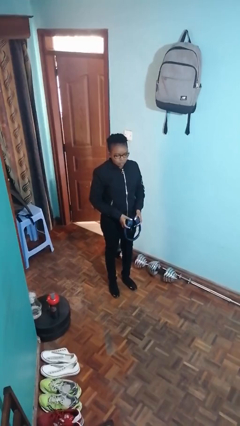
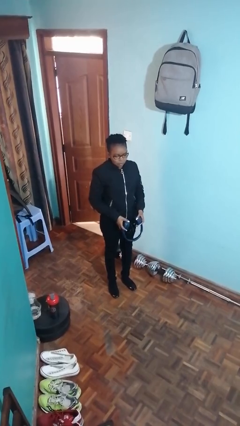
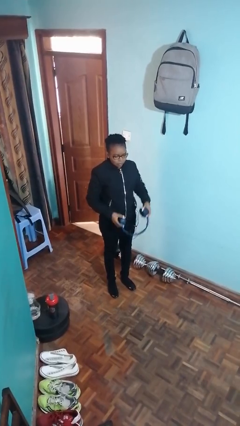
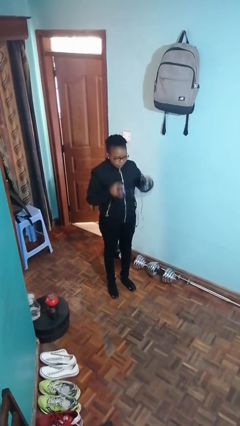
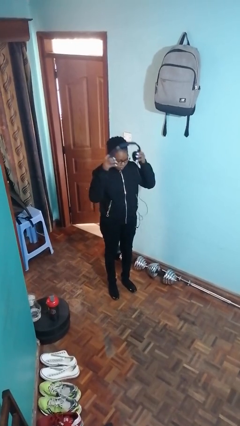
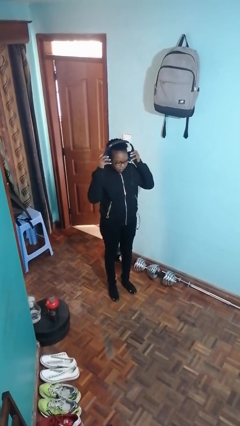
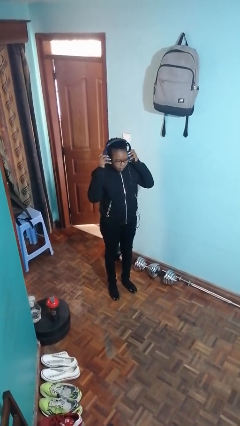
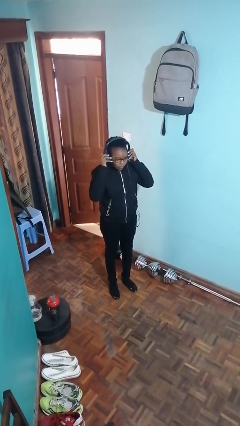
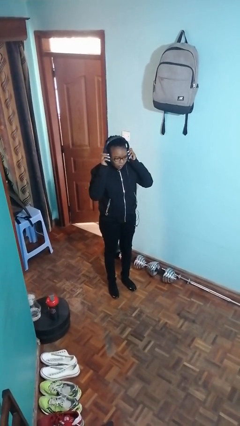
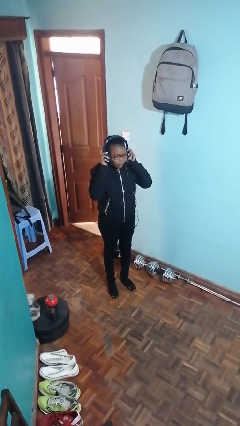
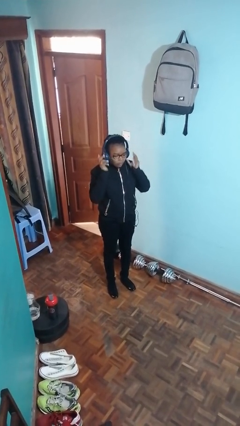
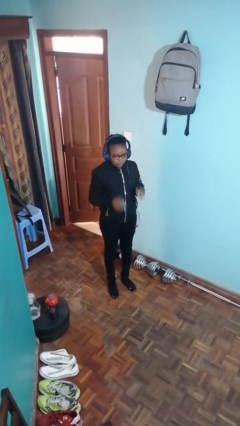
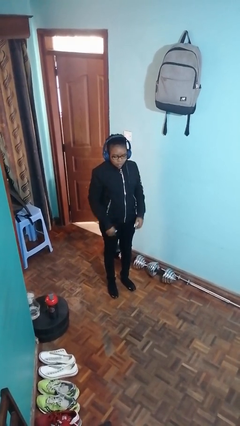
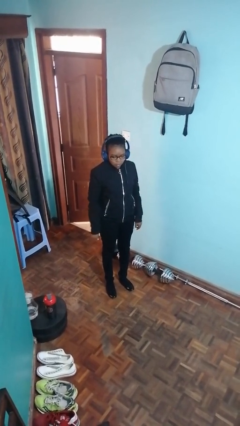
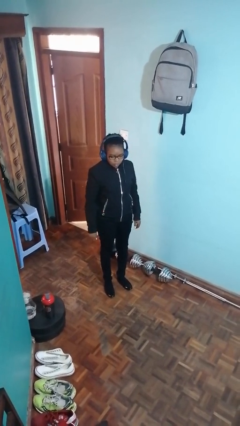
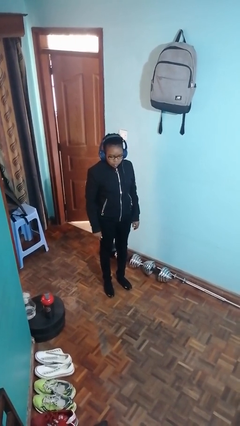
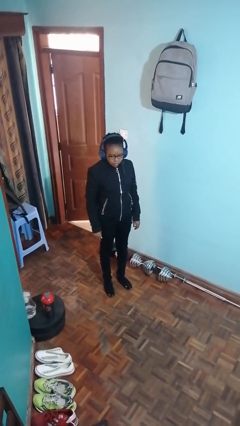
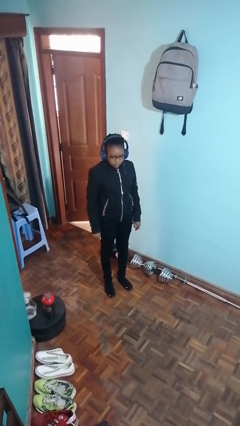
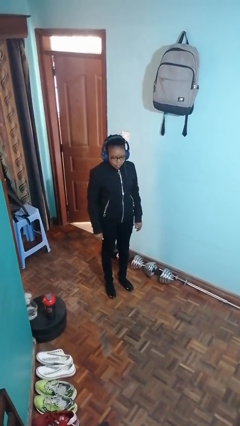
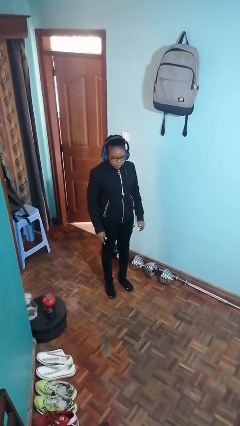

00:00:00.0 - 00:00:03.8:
person puts on headphones

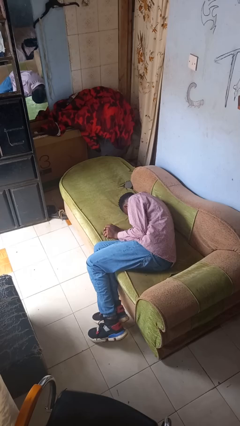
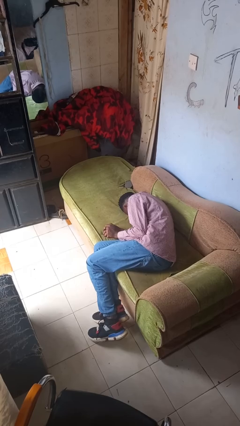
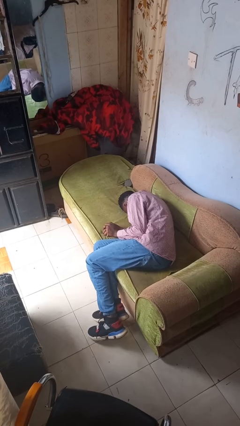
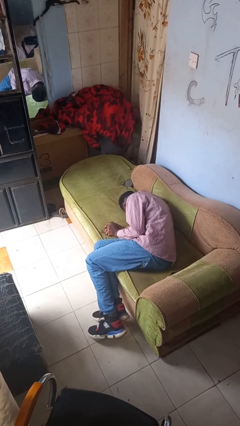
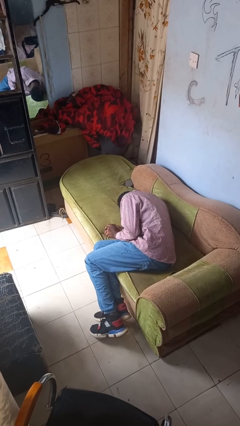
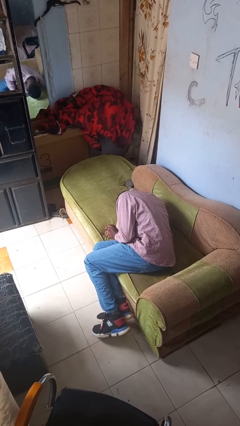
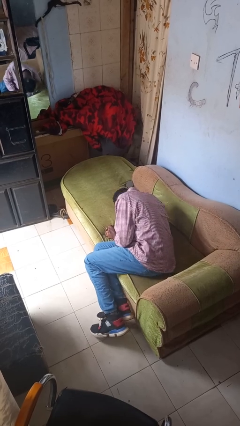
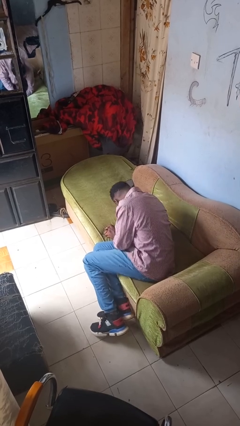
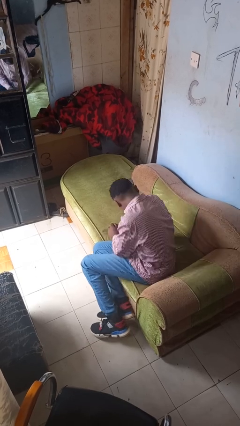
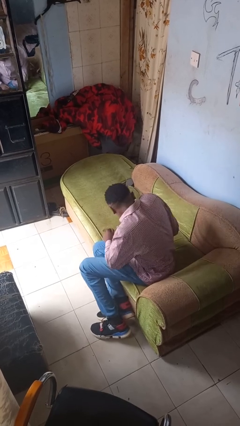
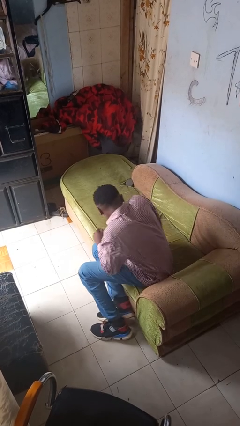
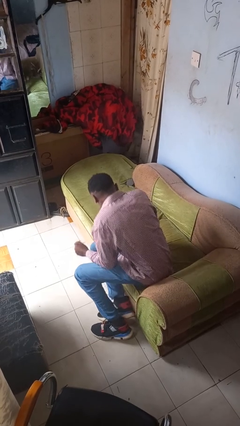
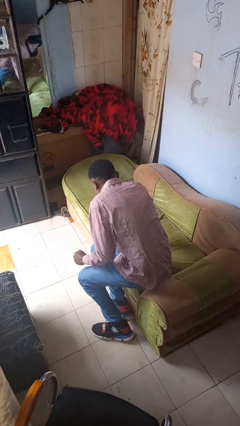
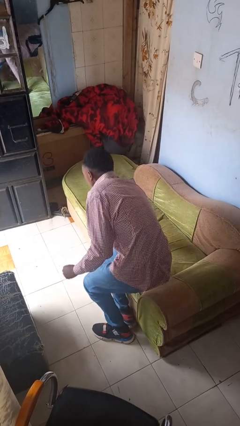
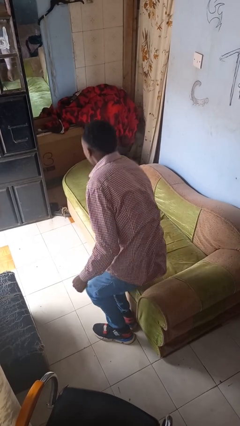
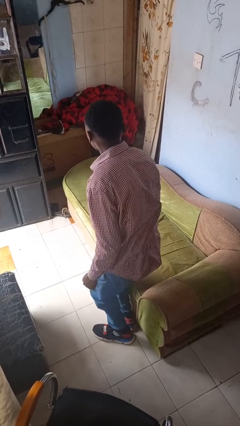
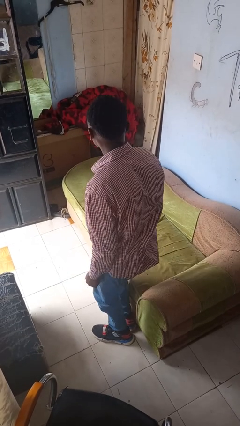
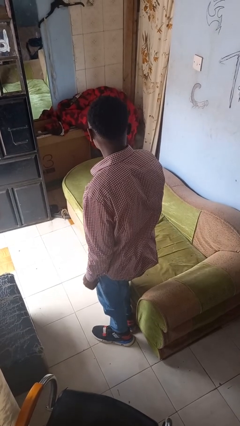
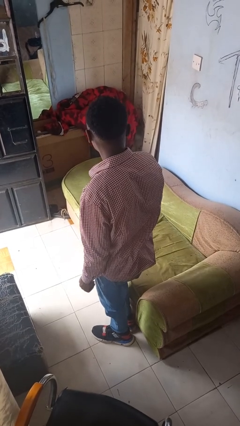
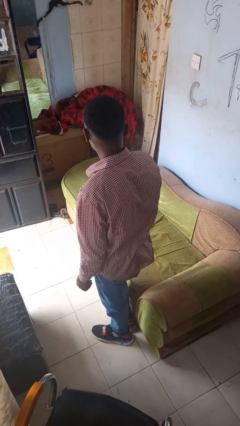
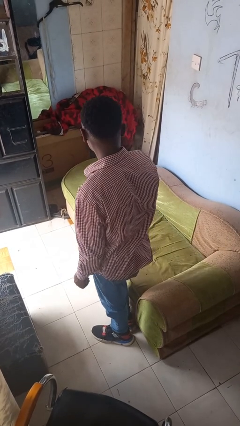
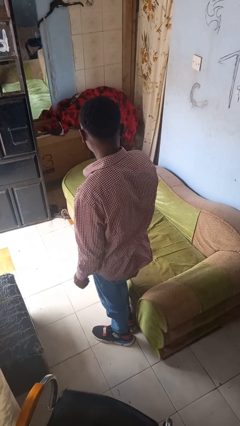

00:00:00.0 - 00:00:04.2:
person stands up

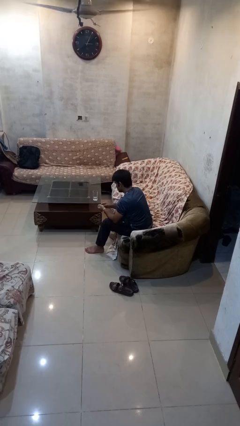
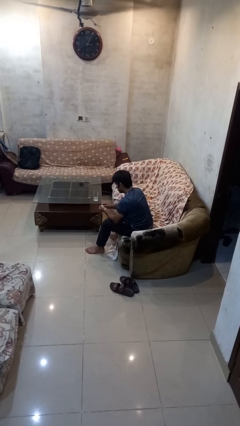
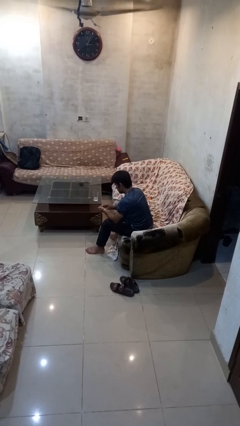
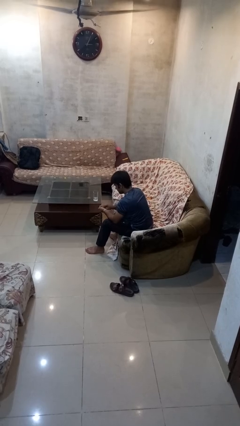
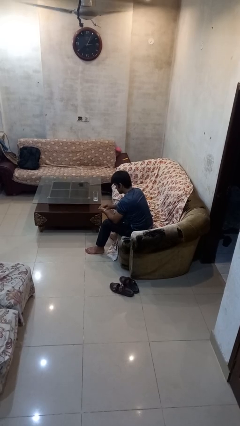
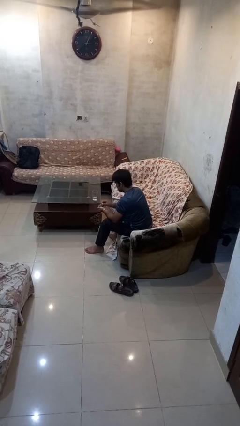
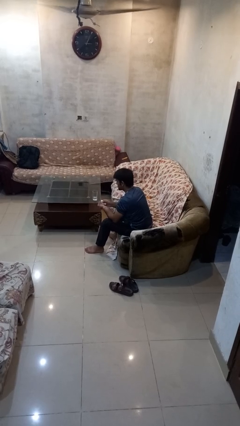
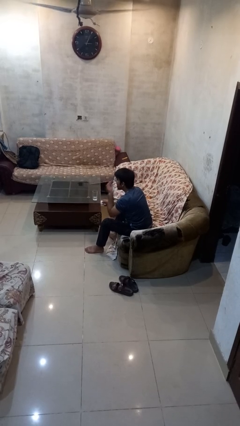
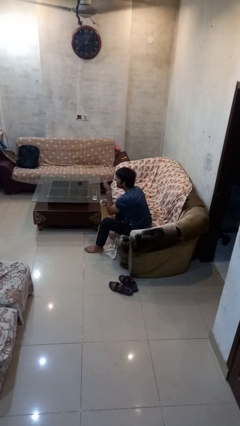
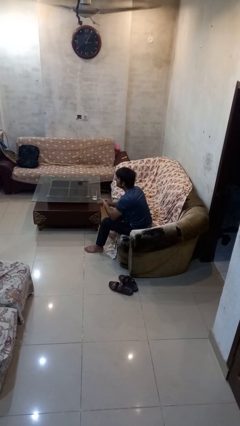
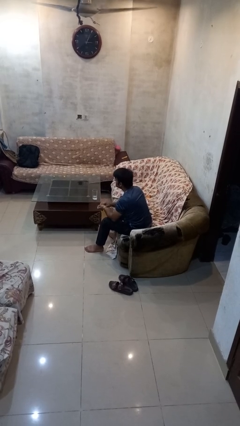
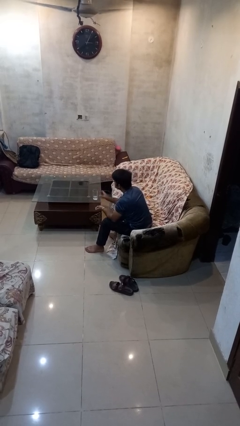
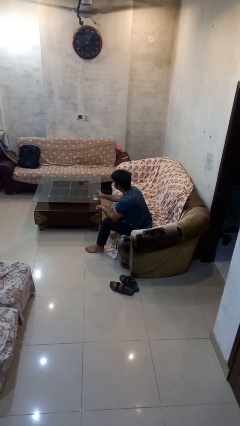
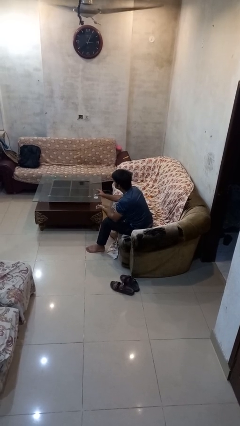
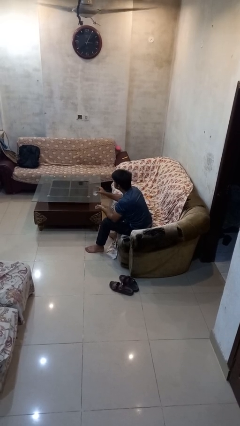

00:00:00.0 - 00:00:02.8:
person takes medicine pills

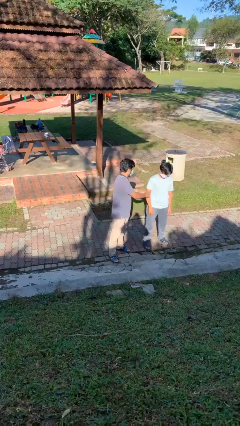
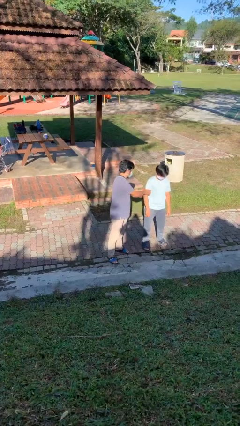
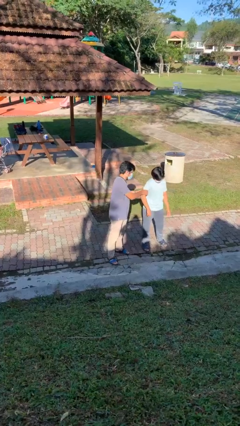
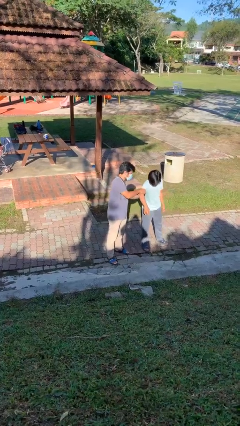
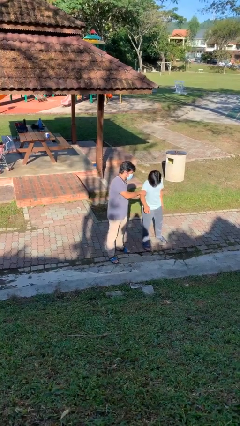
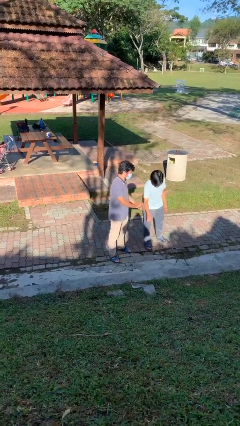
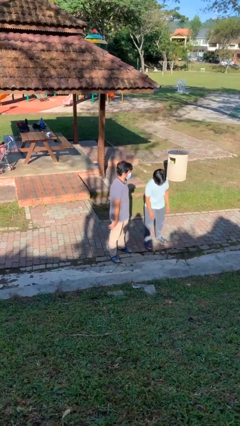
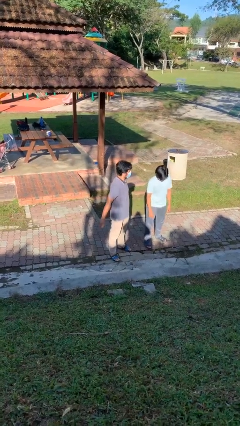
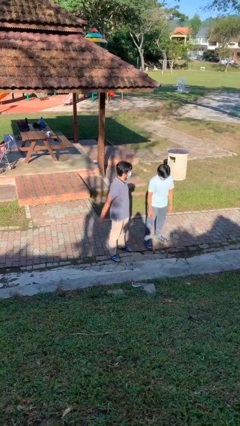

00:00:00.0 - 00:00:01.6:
person grabs person by bicep

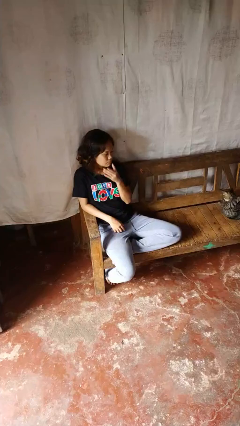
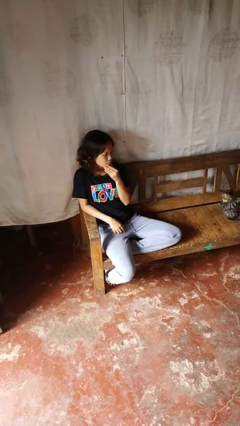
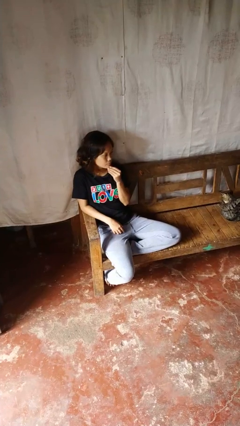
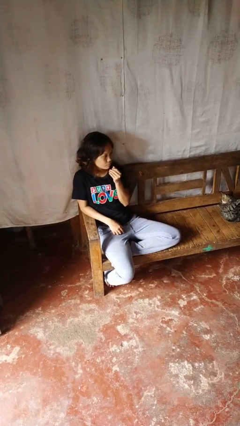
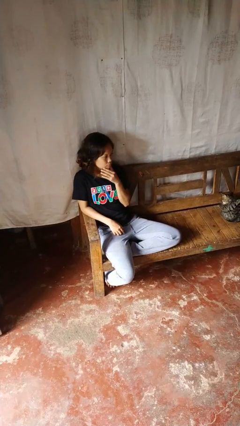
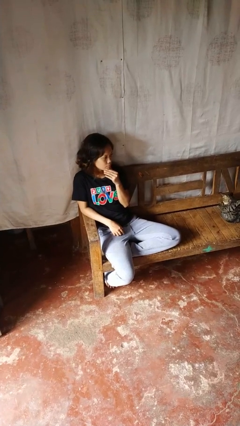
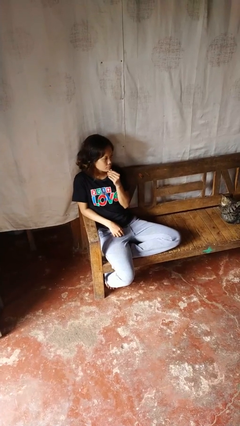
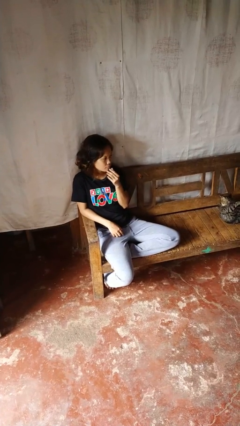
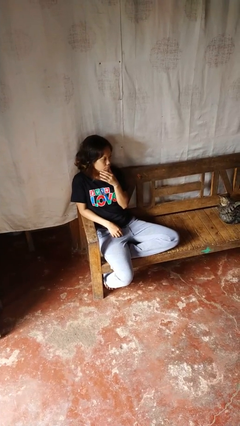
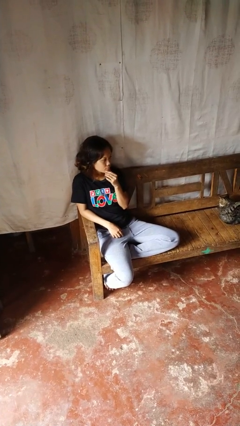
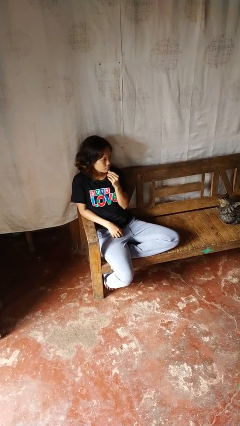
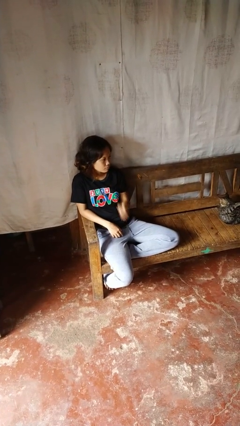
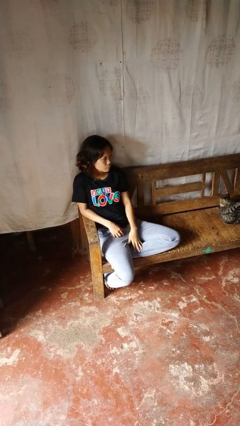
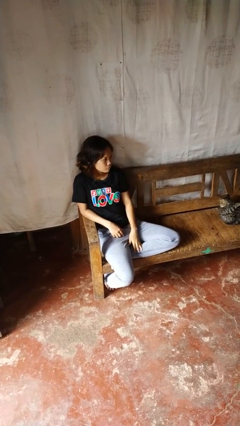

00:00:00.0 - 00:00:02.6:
person strokes chin

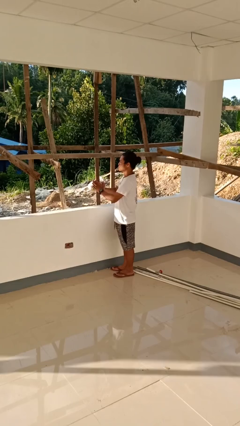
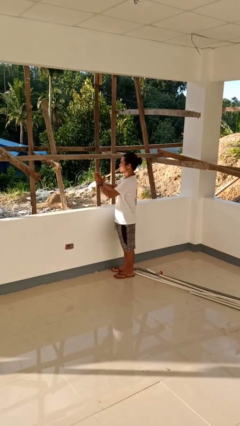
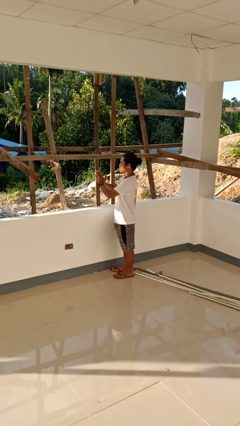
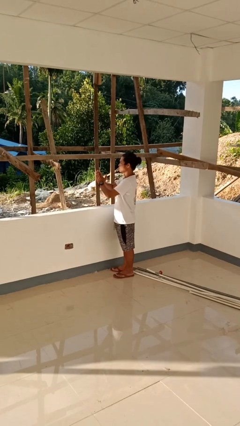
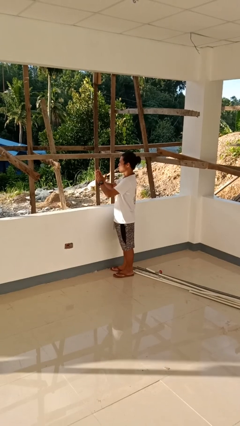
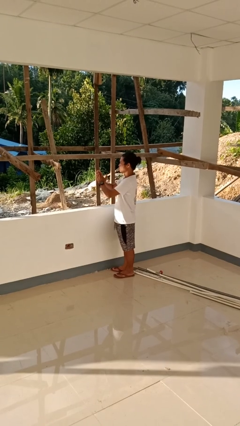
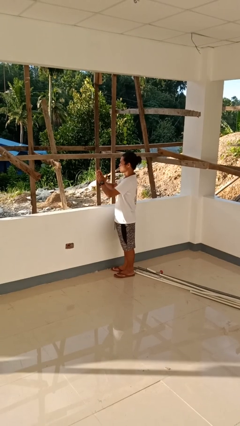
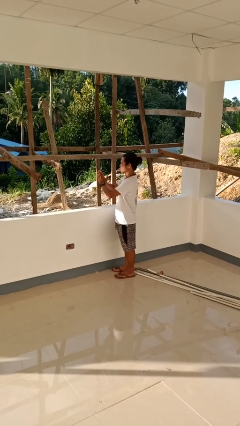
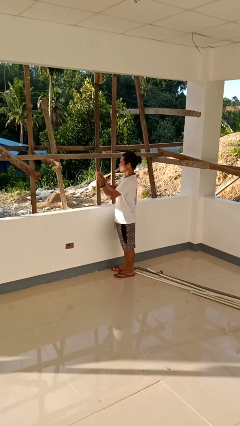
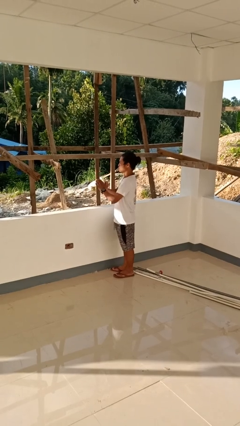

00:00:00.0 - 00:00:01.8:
person prays

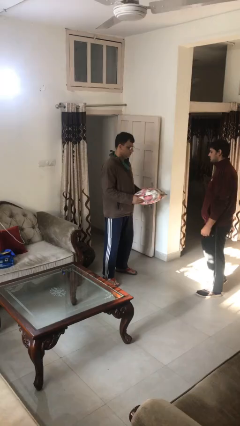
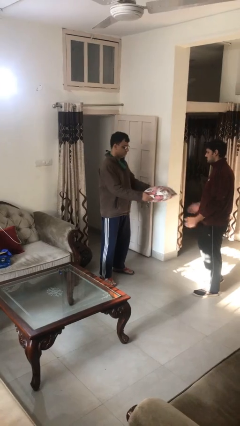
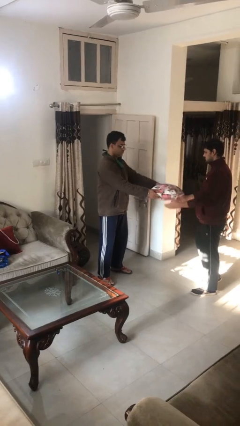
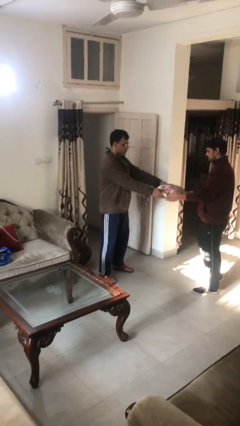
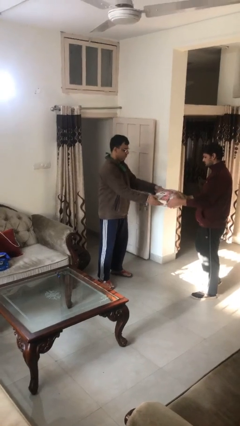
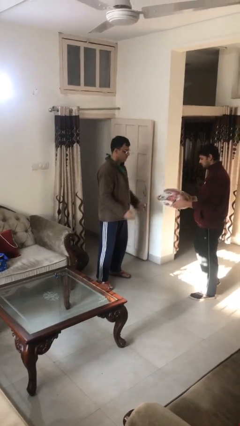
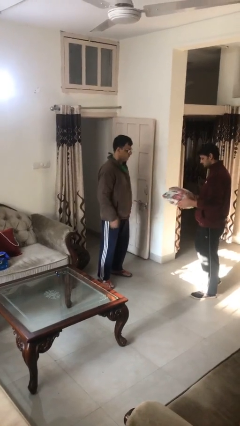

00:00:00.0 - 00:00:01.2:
person transfers object to person
